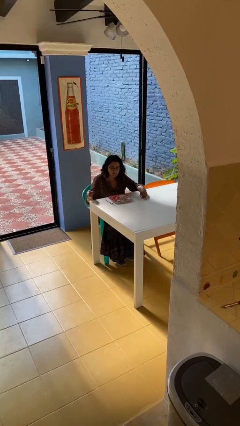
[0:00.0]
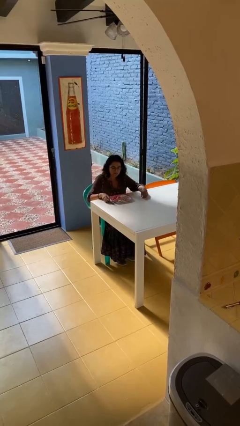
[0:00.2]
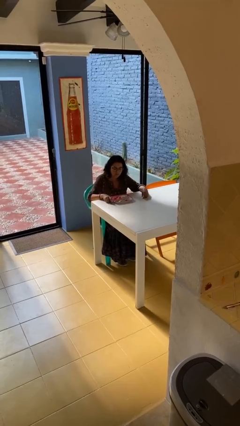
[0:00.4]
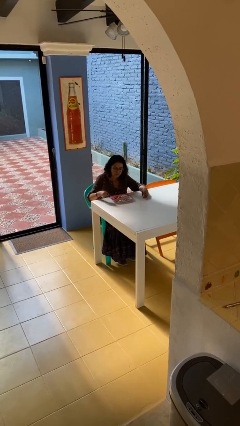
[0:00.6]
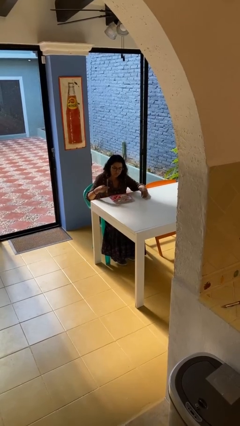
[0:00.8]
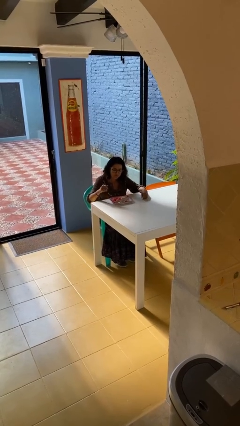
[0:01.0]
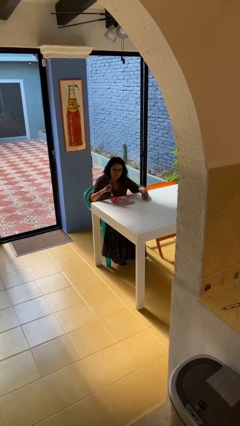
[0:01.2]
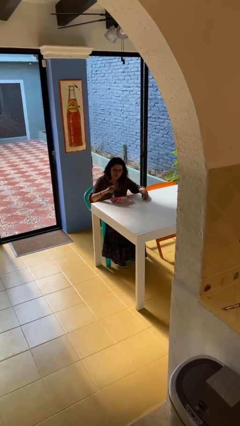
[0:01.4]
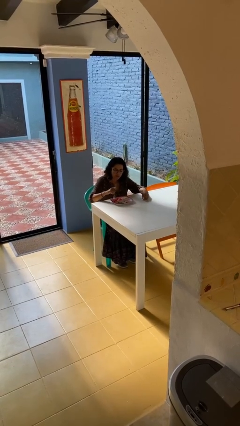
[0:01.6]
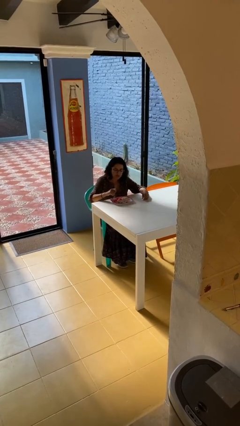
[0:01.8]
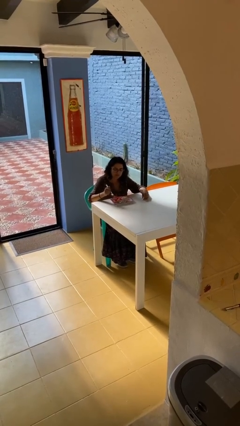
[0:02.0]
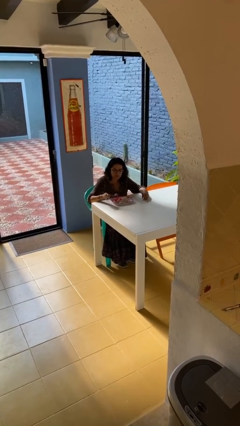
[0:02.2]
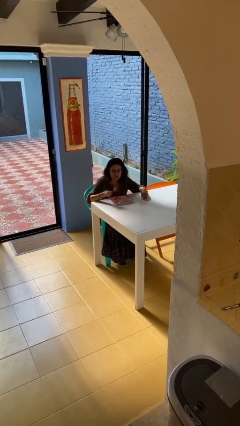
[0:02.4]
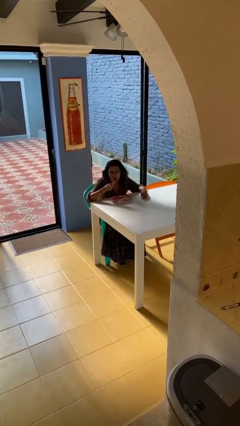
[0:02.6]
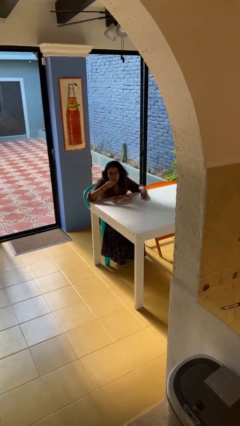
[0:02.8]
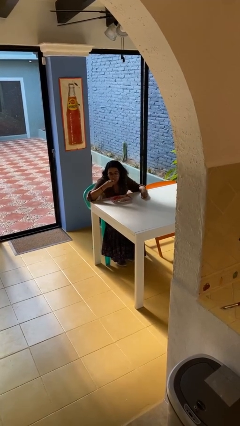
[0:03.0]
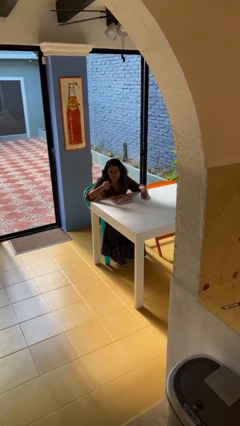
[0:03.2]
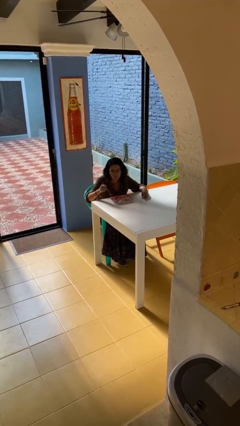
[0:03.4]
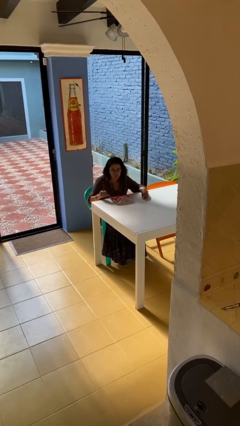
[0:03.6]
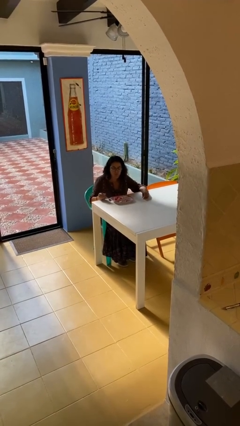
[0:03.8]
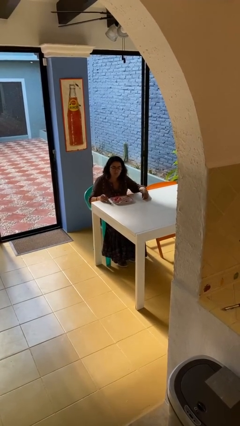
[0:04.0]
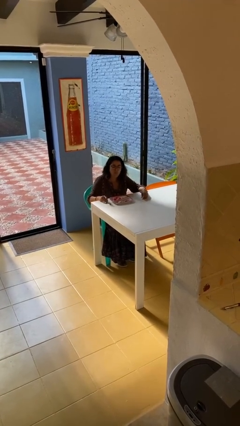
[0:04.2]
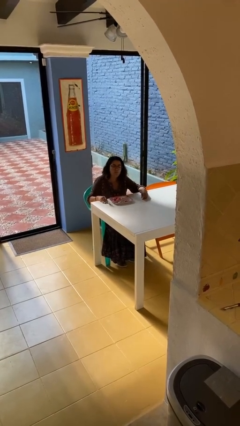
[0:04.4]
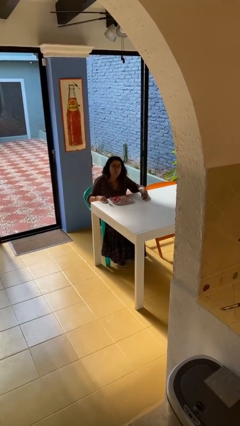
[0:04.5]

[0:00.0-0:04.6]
person eats with utensil

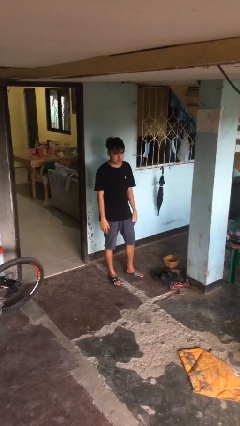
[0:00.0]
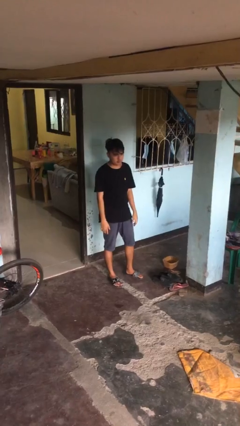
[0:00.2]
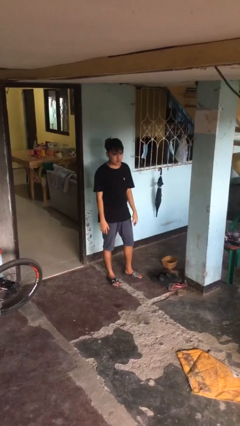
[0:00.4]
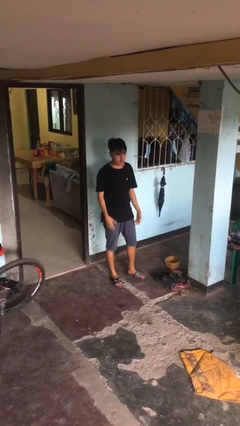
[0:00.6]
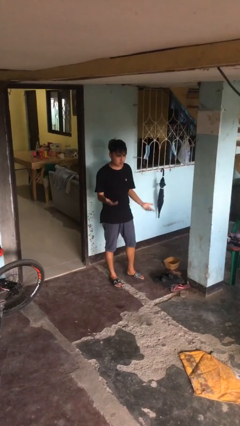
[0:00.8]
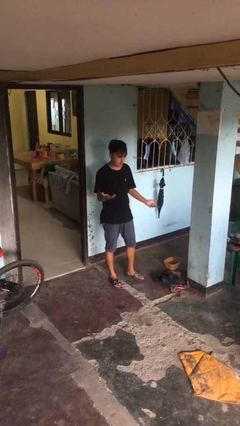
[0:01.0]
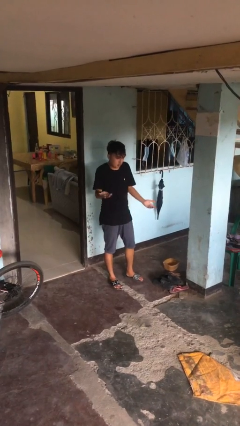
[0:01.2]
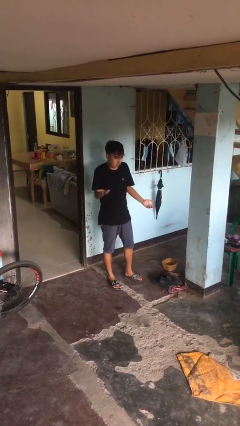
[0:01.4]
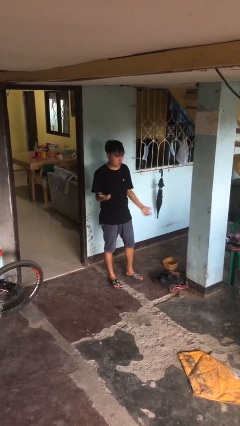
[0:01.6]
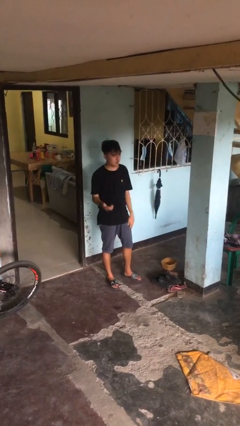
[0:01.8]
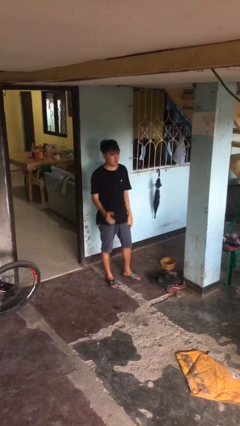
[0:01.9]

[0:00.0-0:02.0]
person shrugs

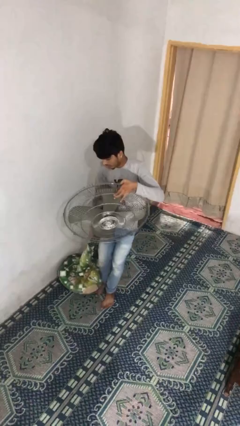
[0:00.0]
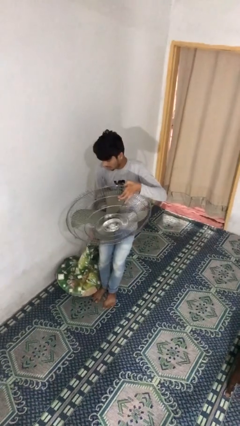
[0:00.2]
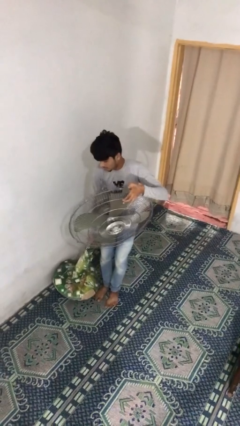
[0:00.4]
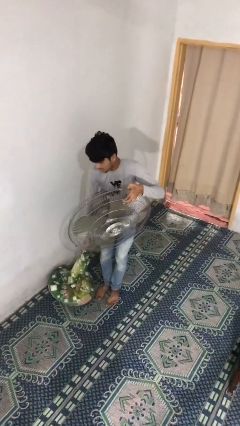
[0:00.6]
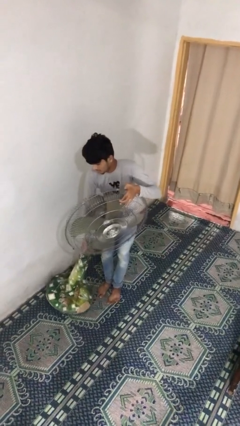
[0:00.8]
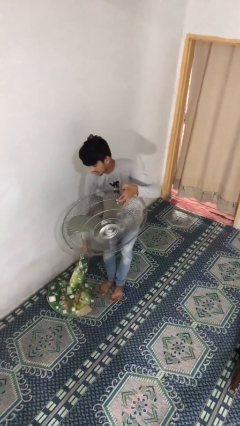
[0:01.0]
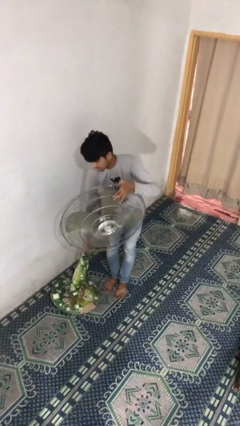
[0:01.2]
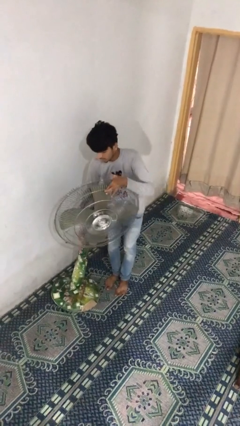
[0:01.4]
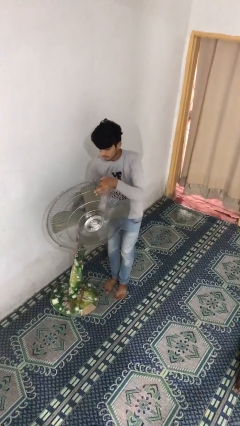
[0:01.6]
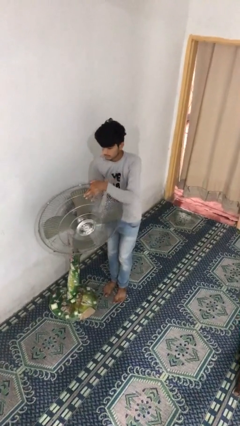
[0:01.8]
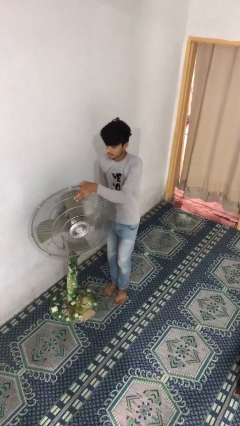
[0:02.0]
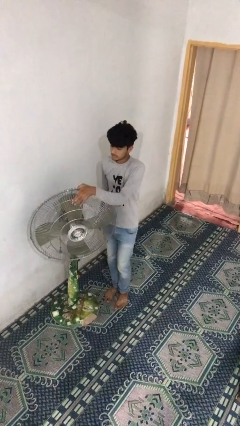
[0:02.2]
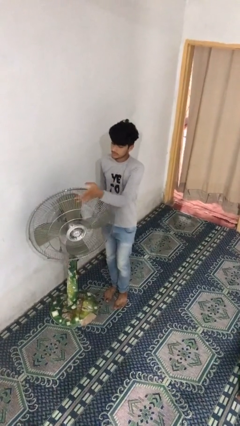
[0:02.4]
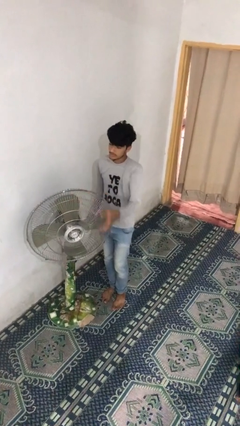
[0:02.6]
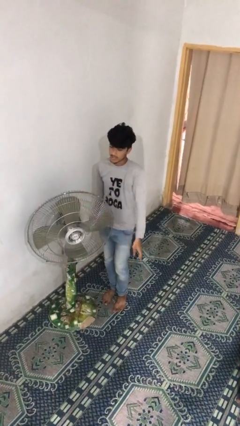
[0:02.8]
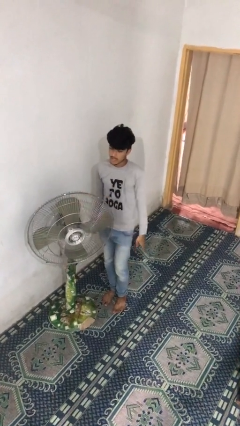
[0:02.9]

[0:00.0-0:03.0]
person puts down object on floor

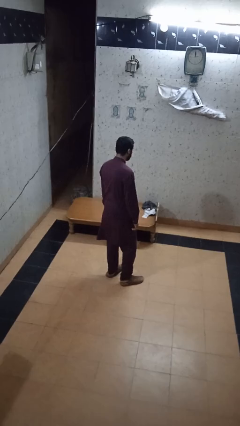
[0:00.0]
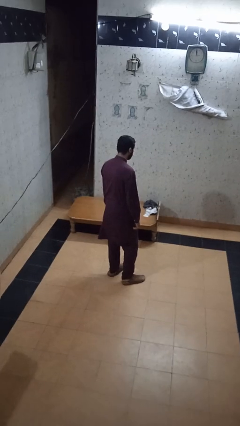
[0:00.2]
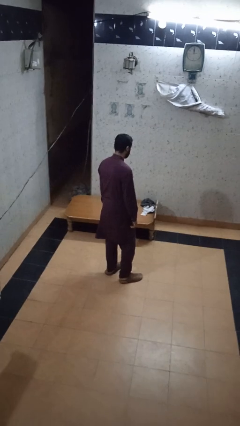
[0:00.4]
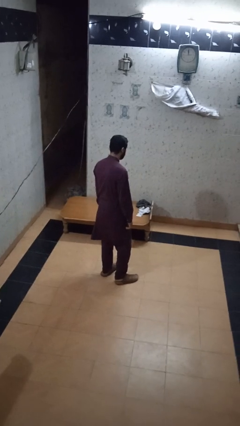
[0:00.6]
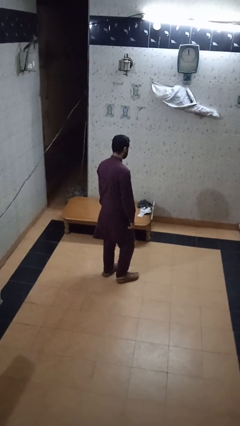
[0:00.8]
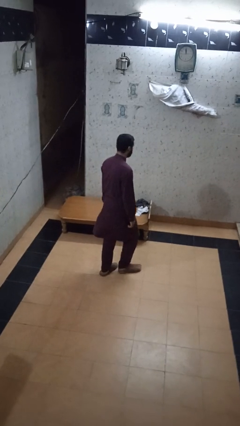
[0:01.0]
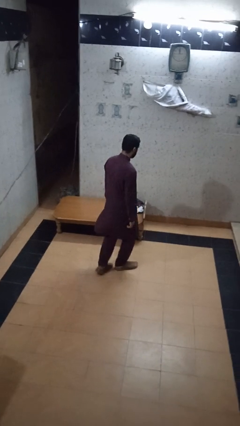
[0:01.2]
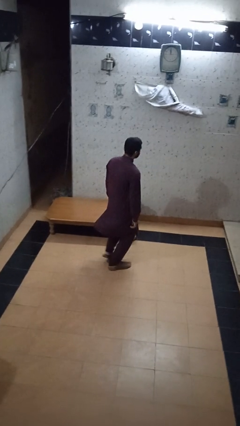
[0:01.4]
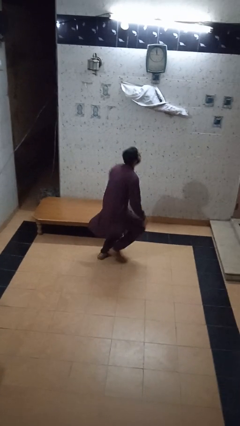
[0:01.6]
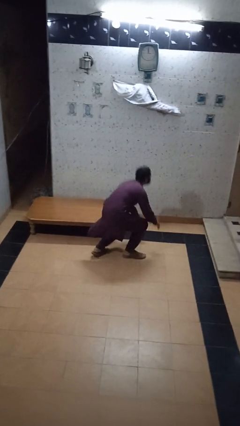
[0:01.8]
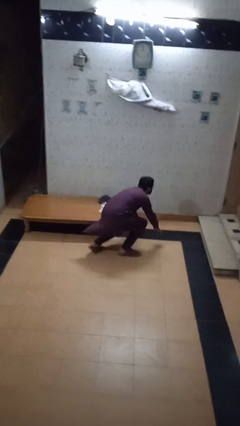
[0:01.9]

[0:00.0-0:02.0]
person trips on object on floor

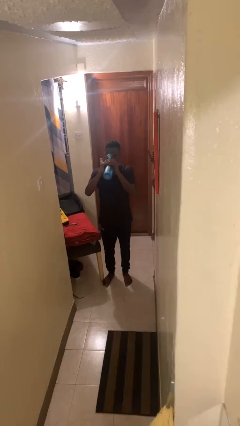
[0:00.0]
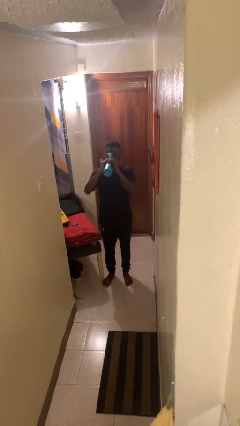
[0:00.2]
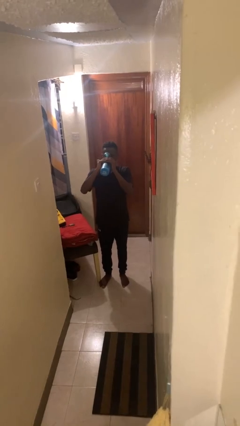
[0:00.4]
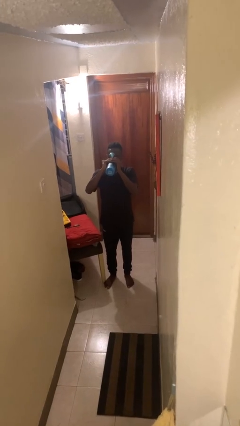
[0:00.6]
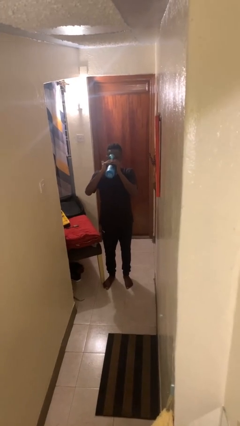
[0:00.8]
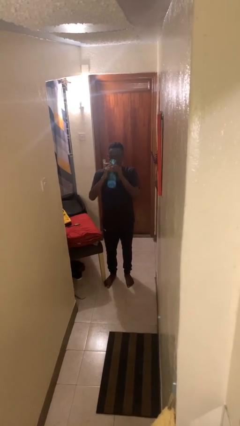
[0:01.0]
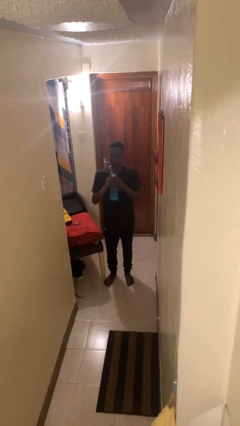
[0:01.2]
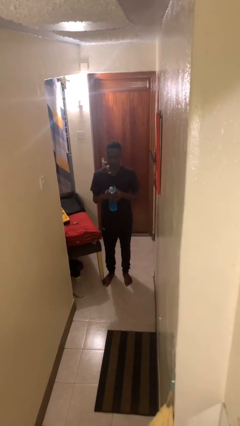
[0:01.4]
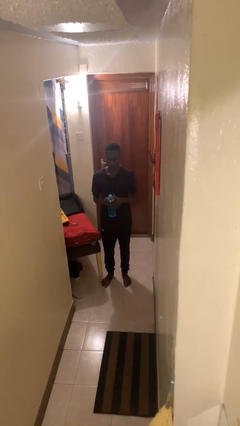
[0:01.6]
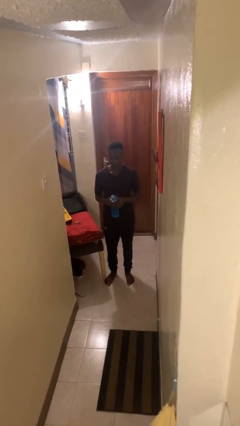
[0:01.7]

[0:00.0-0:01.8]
person drinks from bottle

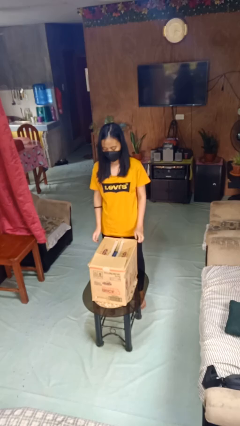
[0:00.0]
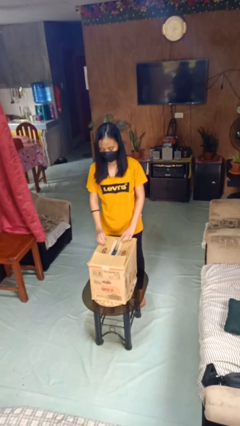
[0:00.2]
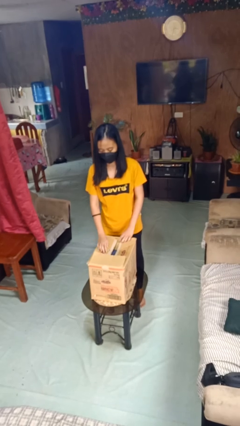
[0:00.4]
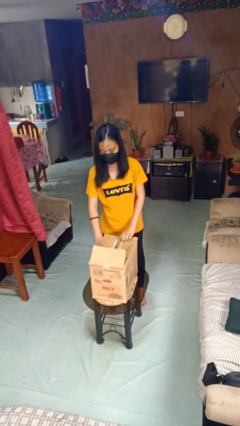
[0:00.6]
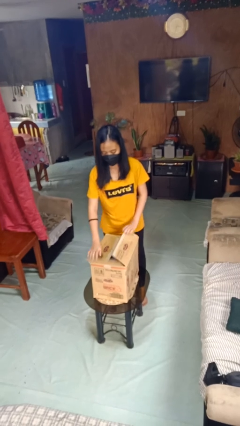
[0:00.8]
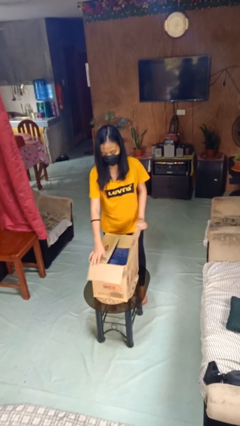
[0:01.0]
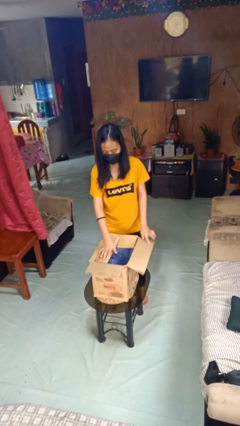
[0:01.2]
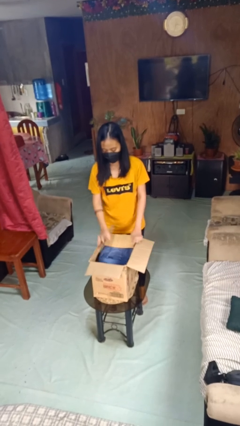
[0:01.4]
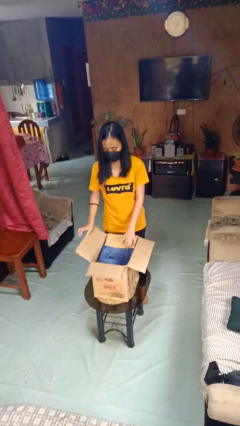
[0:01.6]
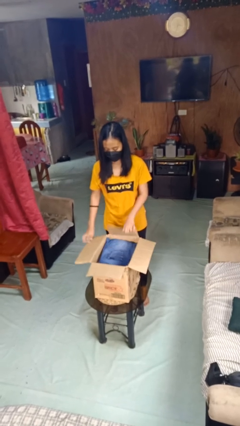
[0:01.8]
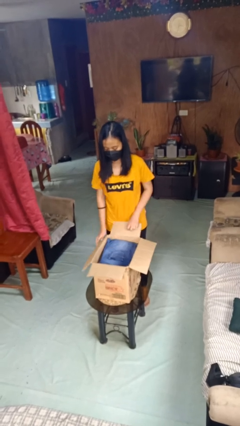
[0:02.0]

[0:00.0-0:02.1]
person opens box

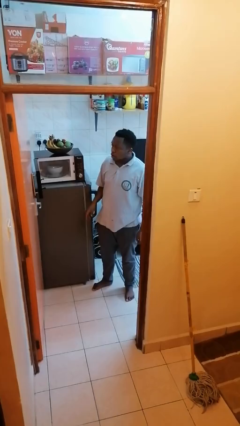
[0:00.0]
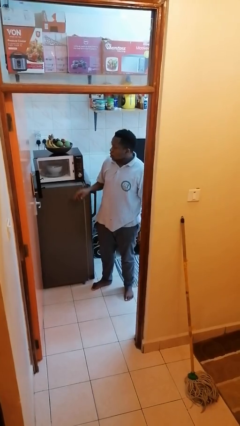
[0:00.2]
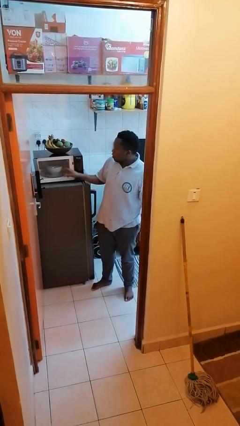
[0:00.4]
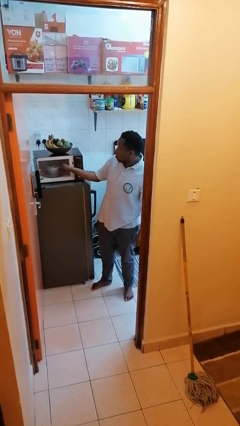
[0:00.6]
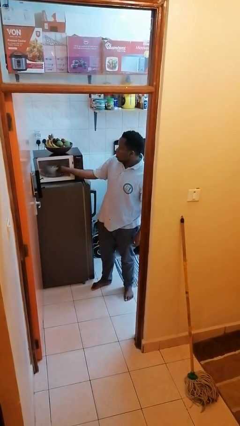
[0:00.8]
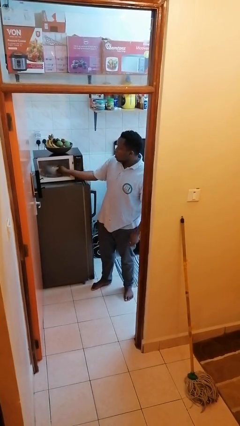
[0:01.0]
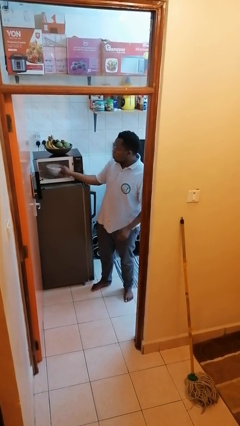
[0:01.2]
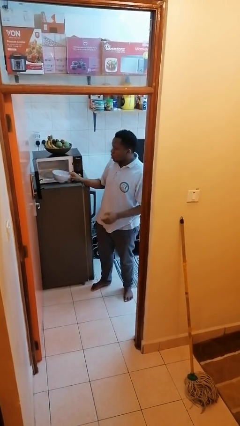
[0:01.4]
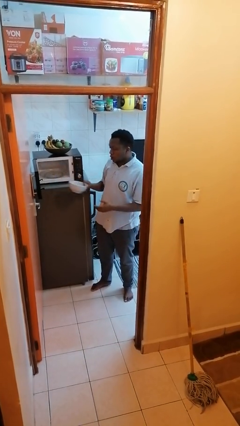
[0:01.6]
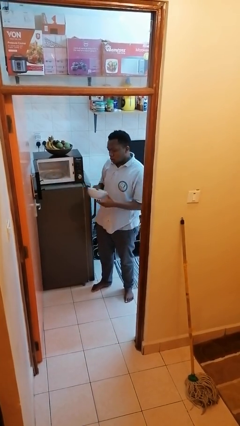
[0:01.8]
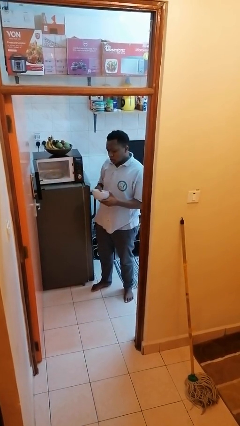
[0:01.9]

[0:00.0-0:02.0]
person takes object from microwave
